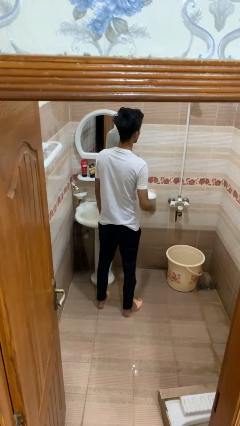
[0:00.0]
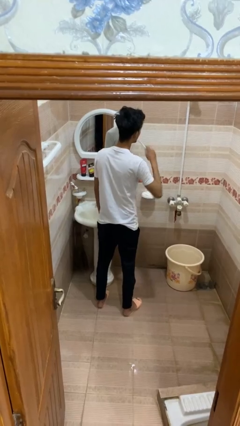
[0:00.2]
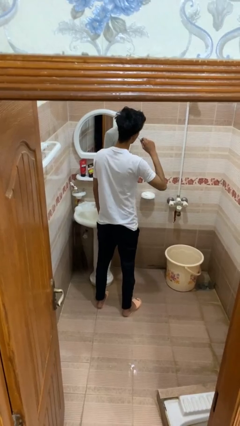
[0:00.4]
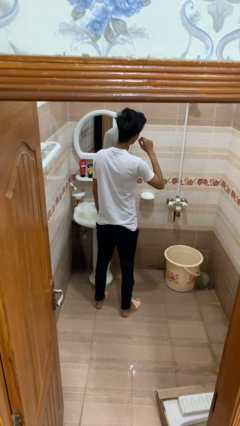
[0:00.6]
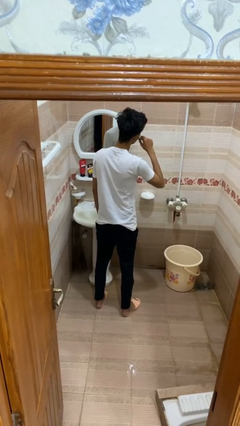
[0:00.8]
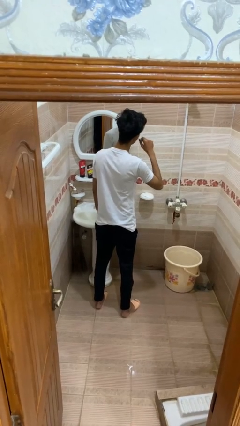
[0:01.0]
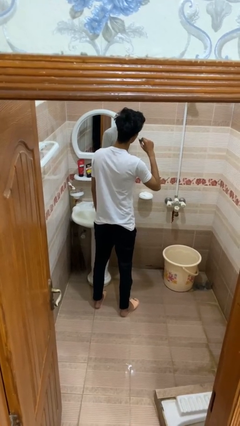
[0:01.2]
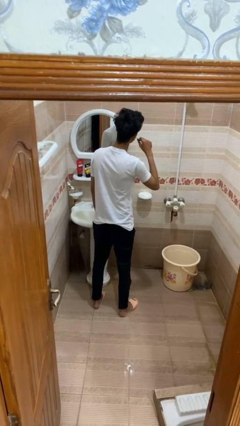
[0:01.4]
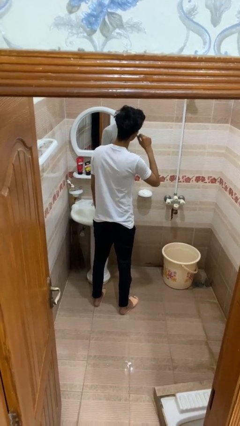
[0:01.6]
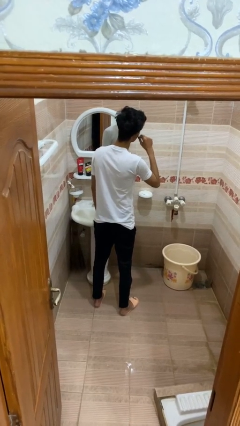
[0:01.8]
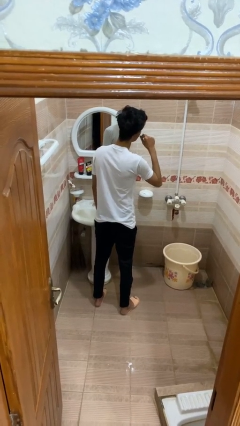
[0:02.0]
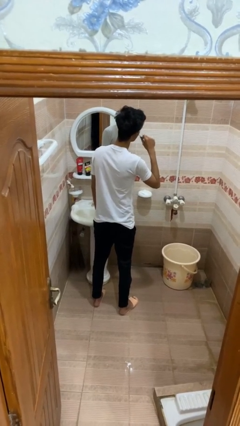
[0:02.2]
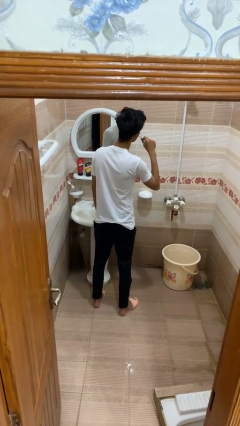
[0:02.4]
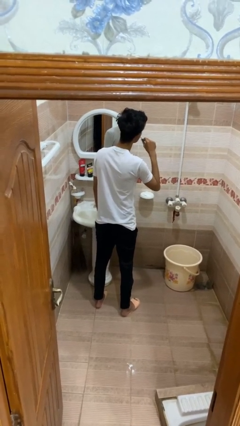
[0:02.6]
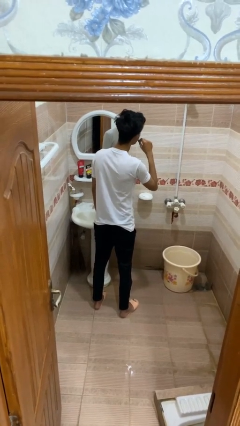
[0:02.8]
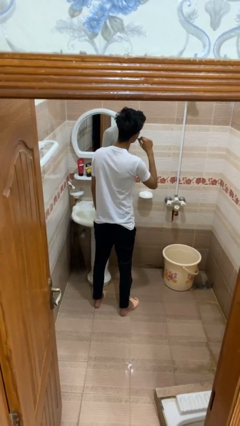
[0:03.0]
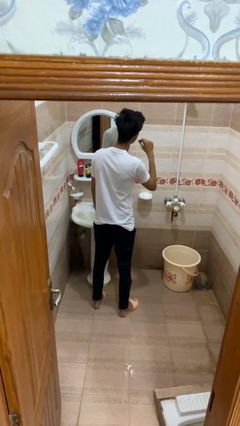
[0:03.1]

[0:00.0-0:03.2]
person brushes teeth

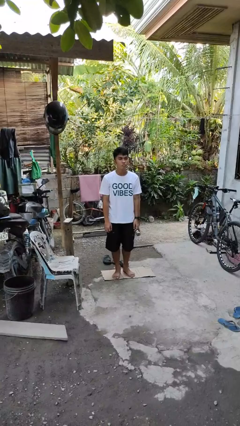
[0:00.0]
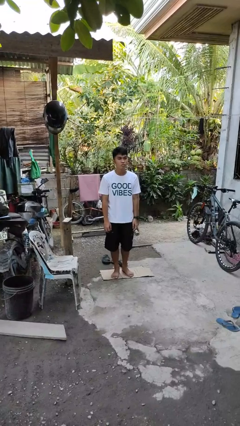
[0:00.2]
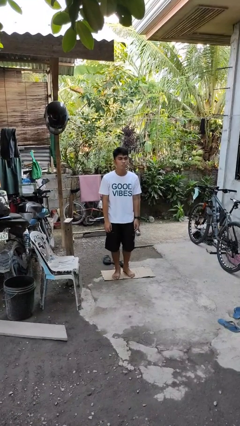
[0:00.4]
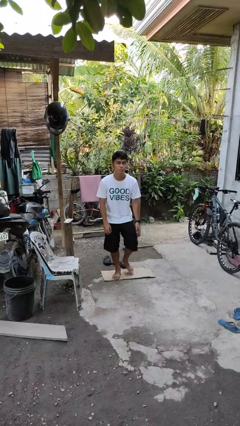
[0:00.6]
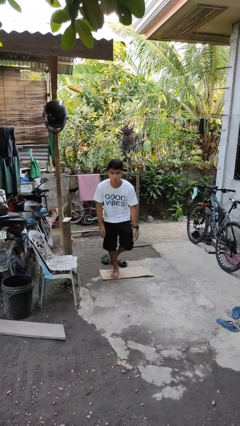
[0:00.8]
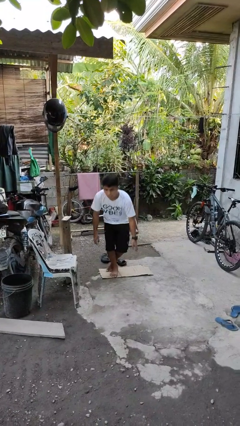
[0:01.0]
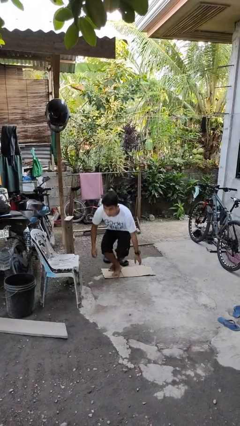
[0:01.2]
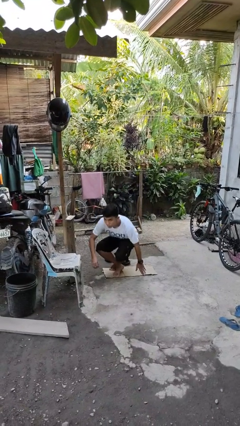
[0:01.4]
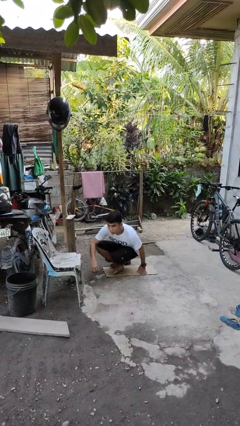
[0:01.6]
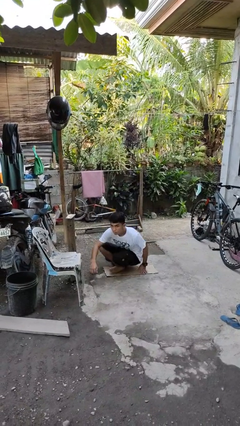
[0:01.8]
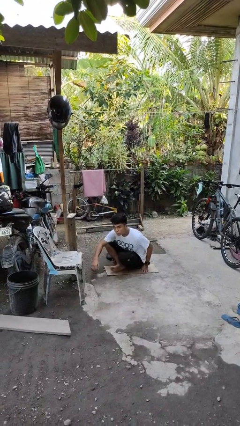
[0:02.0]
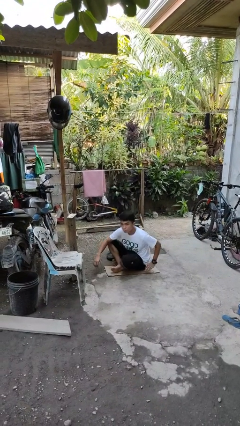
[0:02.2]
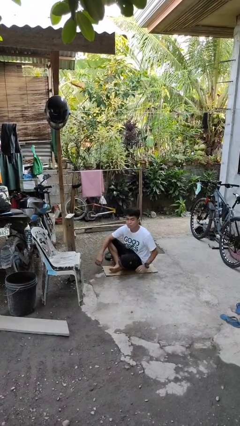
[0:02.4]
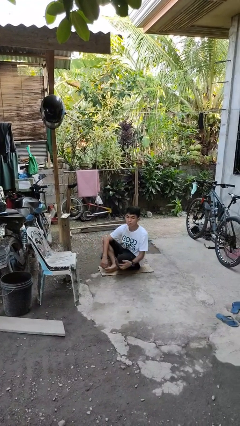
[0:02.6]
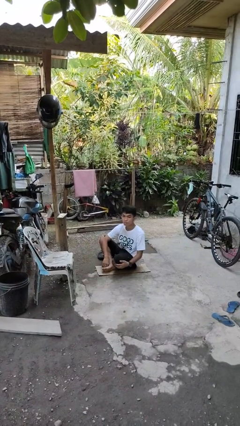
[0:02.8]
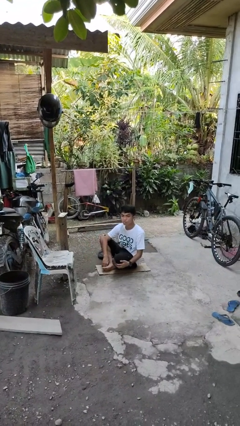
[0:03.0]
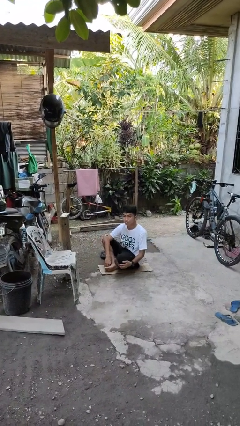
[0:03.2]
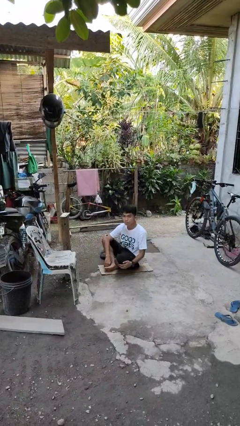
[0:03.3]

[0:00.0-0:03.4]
person sits crisscross

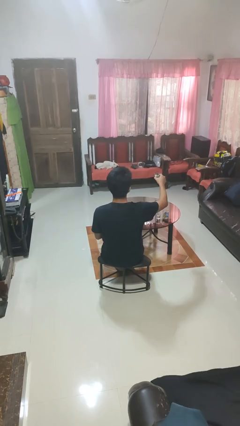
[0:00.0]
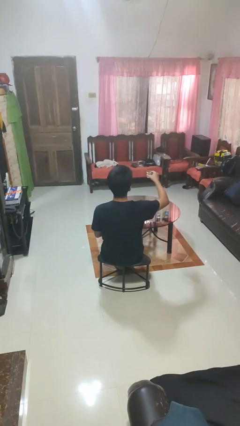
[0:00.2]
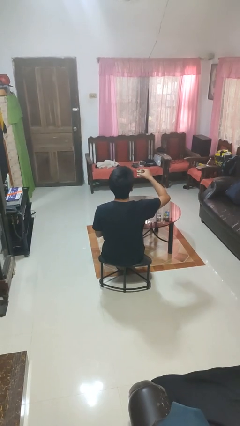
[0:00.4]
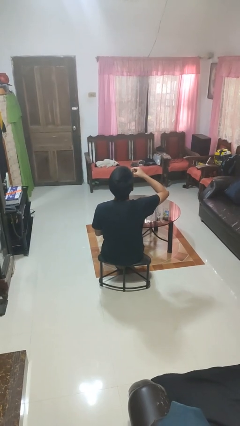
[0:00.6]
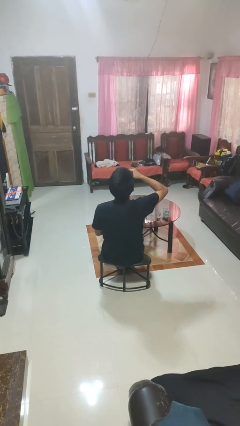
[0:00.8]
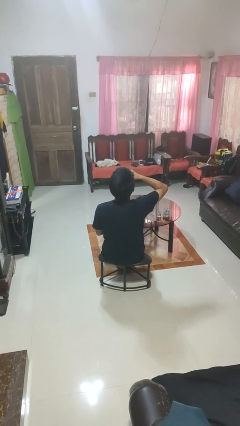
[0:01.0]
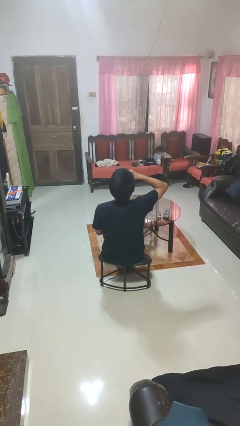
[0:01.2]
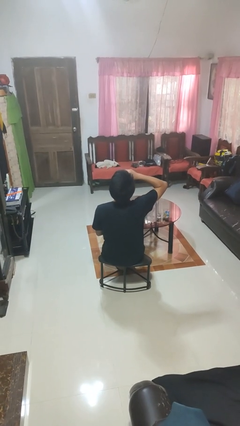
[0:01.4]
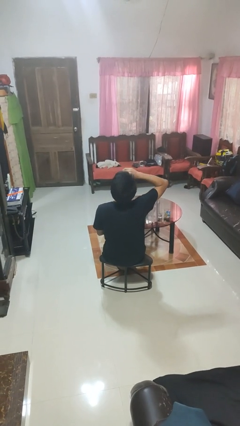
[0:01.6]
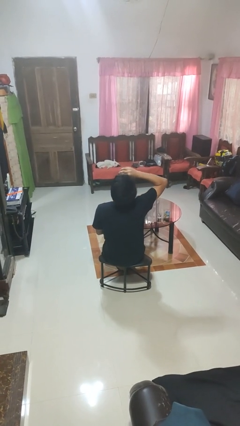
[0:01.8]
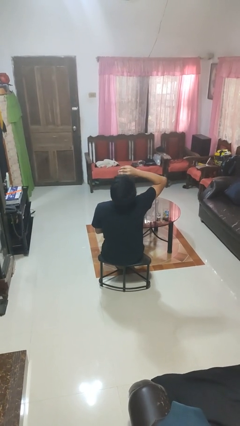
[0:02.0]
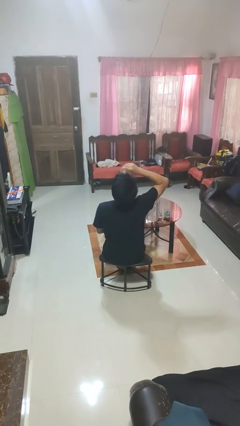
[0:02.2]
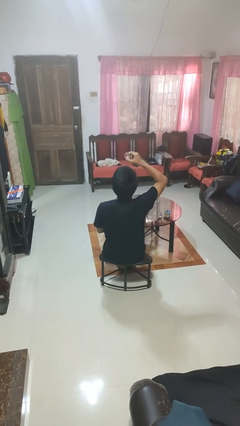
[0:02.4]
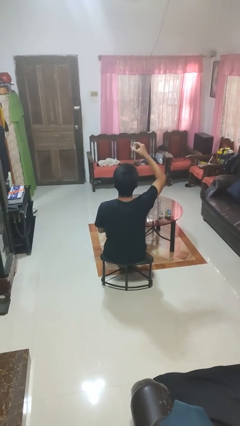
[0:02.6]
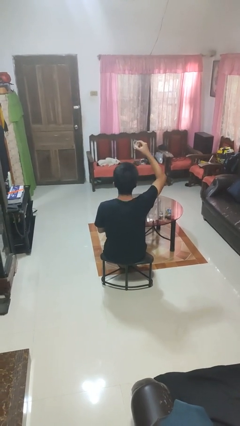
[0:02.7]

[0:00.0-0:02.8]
person drinks from shotglass

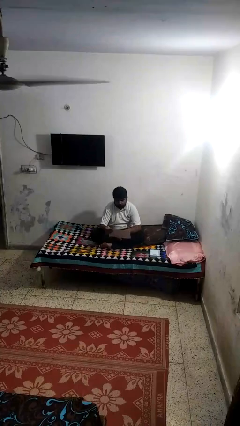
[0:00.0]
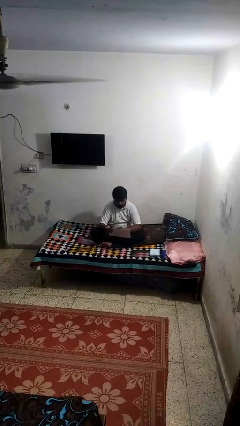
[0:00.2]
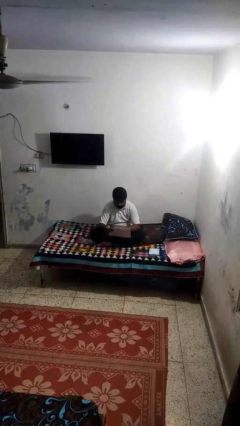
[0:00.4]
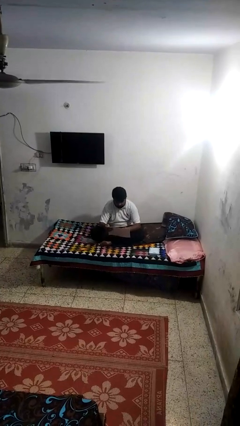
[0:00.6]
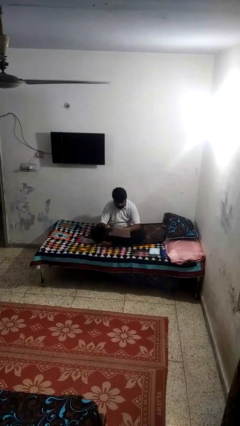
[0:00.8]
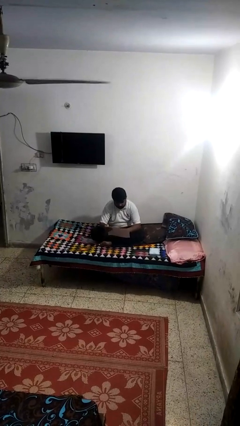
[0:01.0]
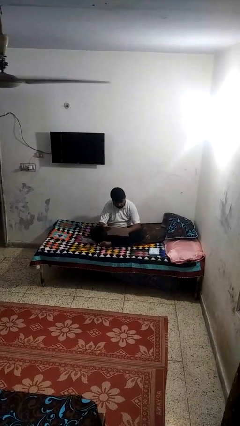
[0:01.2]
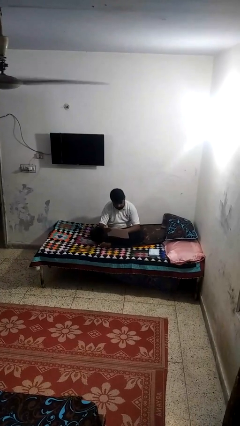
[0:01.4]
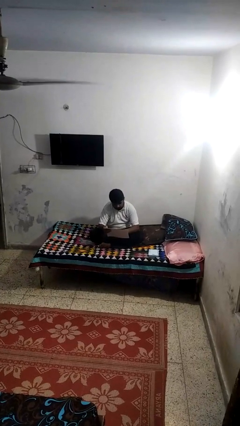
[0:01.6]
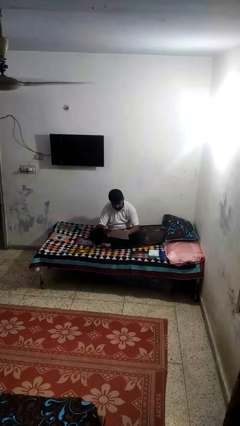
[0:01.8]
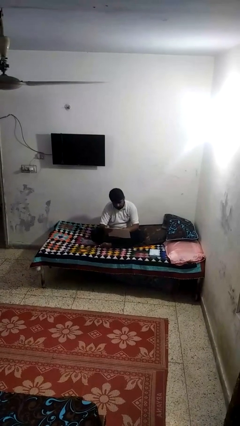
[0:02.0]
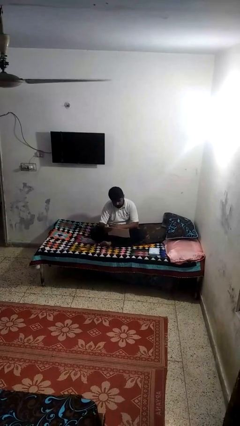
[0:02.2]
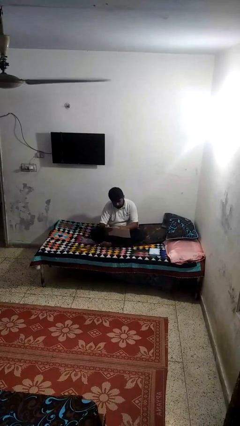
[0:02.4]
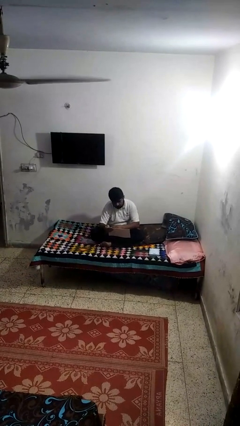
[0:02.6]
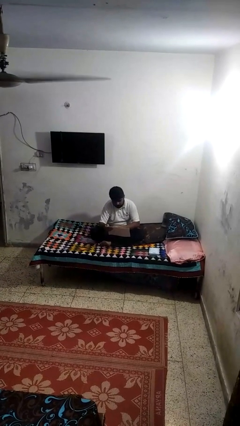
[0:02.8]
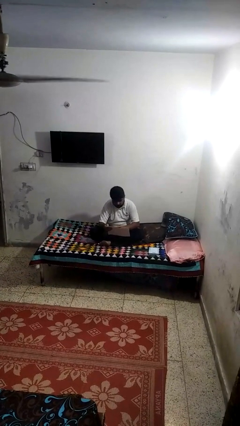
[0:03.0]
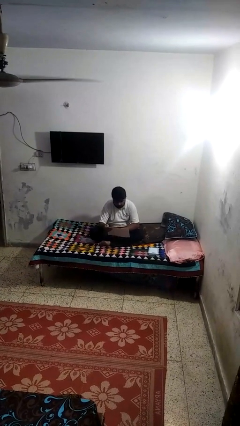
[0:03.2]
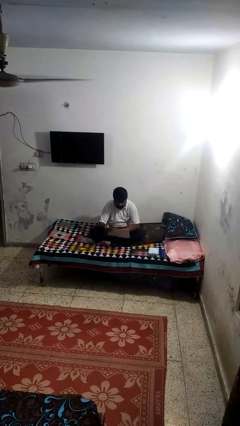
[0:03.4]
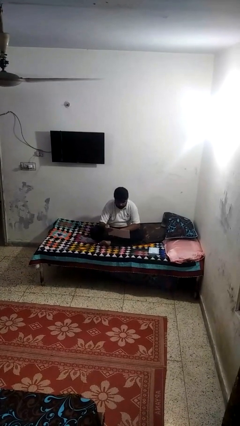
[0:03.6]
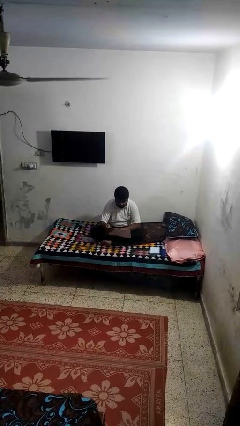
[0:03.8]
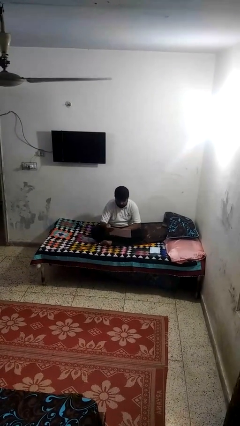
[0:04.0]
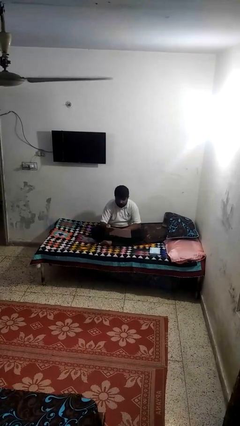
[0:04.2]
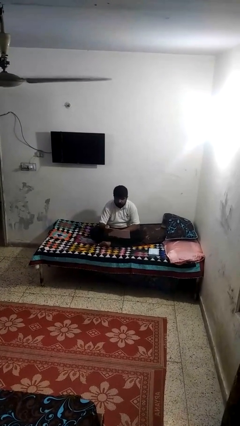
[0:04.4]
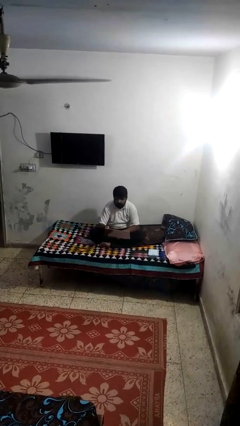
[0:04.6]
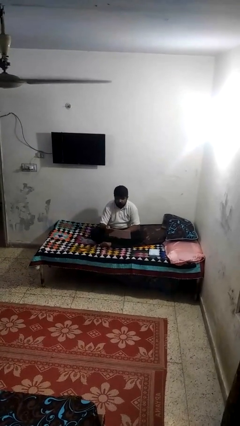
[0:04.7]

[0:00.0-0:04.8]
person interacts with tablet

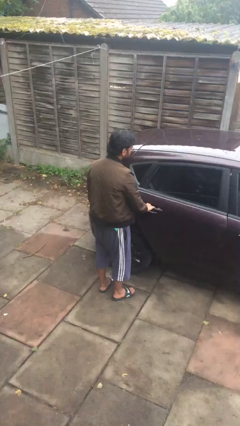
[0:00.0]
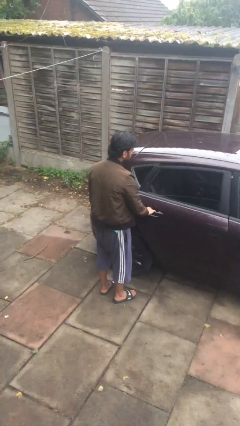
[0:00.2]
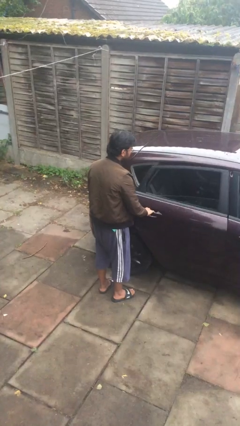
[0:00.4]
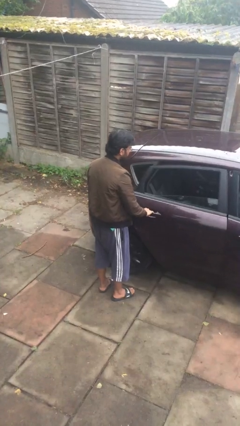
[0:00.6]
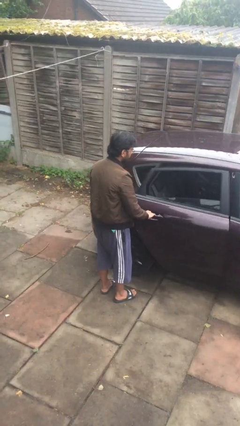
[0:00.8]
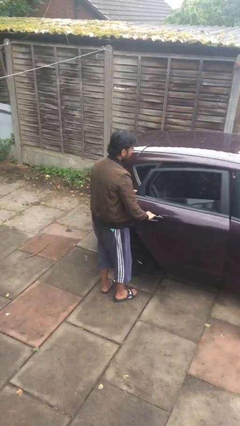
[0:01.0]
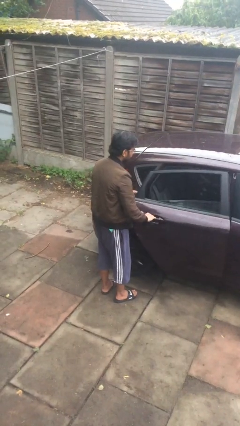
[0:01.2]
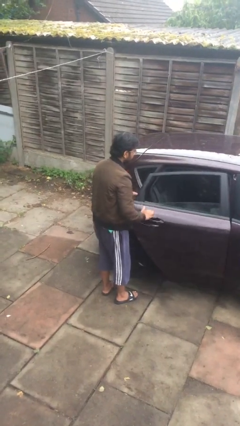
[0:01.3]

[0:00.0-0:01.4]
person opens car door

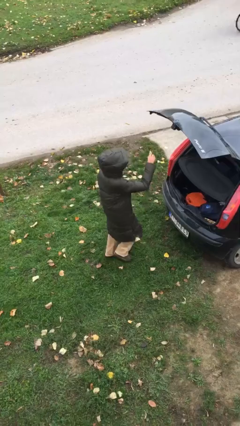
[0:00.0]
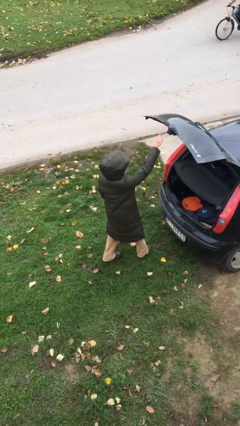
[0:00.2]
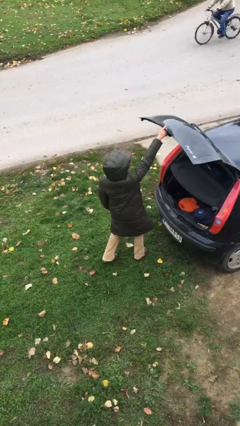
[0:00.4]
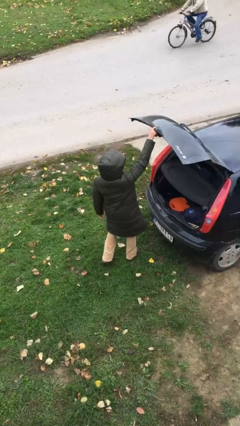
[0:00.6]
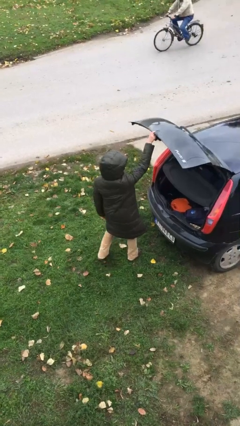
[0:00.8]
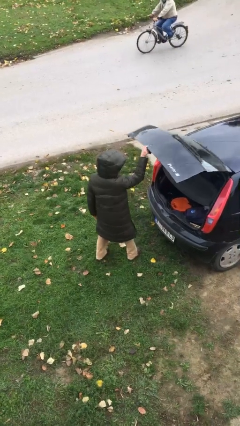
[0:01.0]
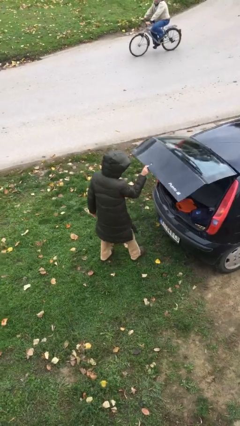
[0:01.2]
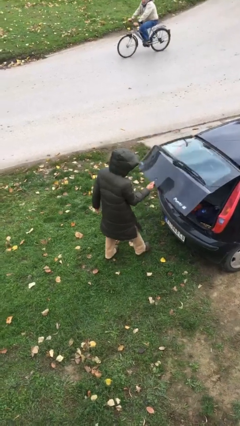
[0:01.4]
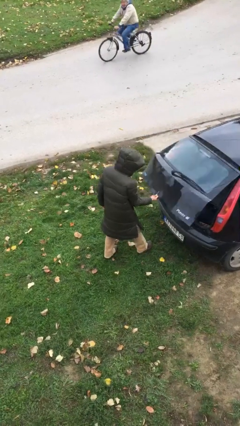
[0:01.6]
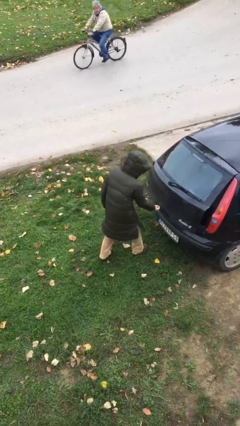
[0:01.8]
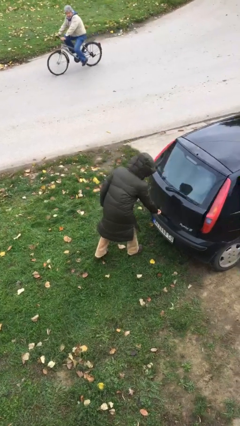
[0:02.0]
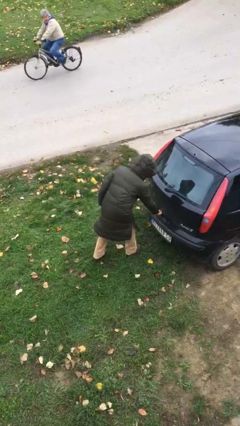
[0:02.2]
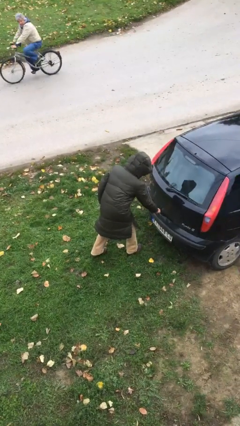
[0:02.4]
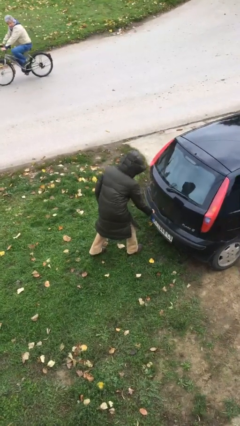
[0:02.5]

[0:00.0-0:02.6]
person closes car trunk
